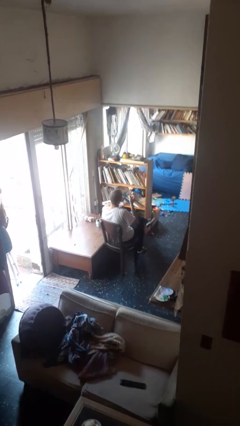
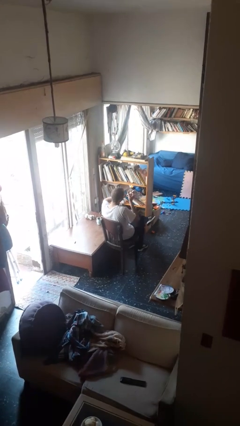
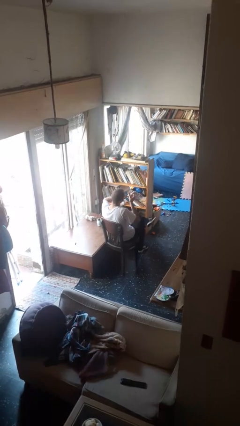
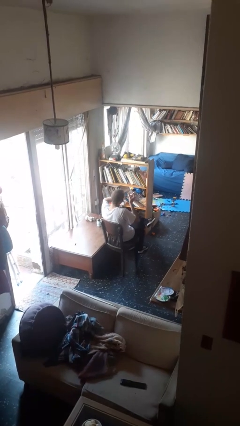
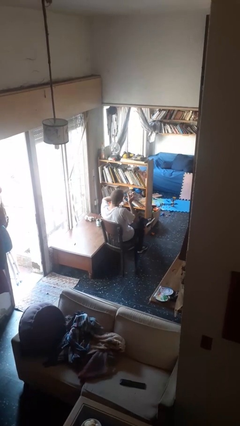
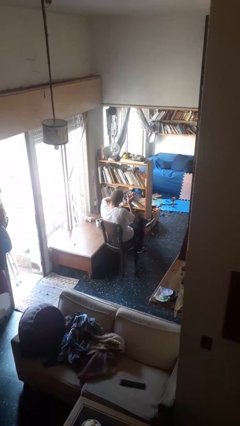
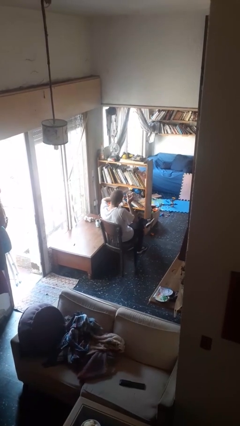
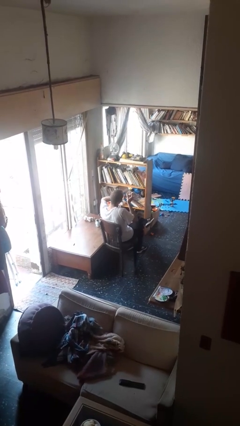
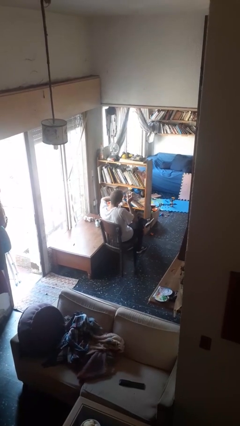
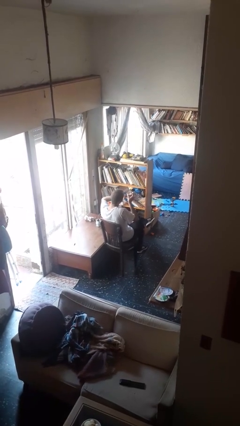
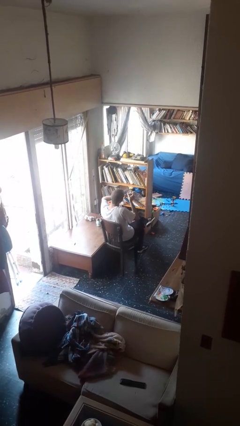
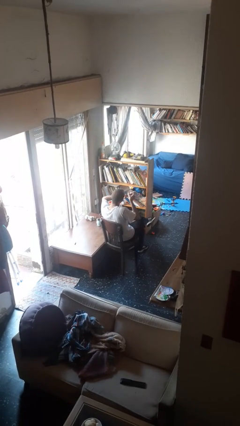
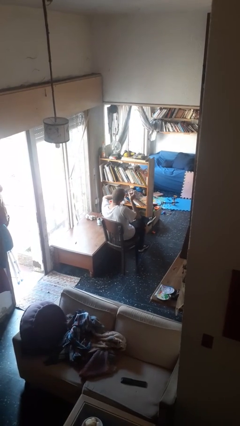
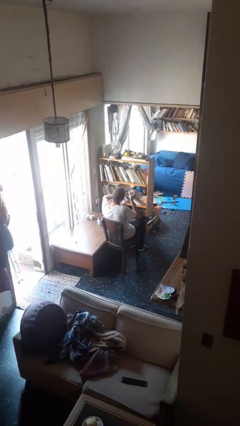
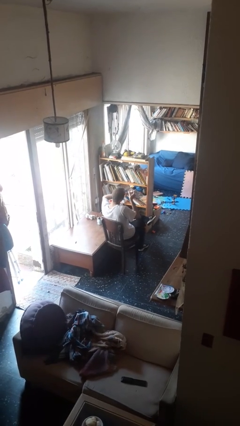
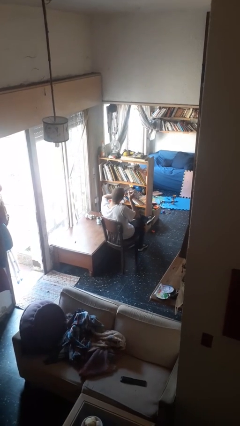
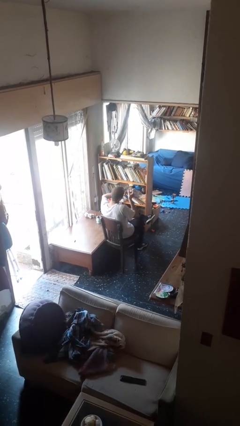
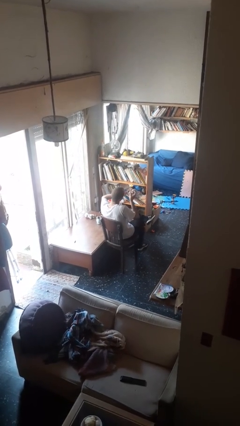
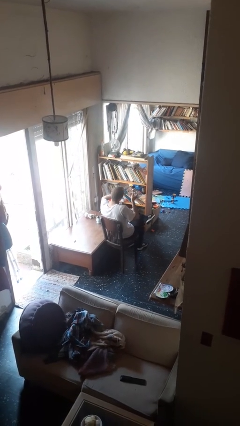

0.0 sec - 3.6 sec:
person clips fingernails

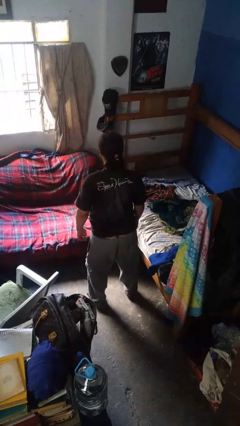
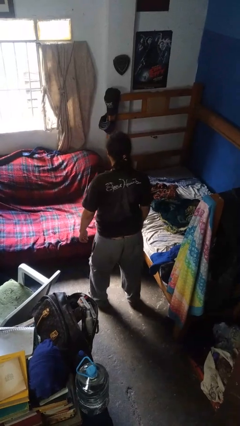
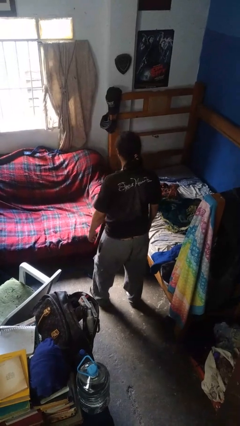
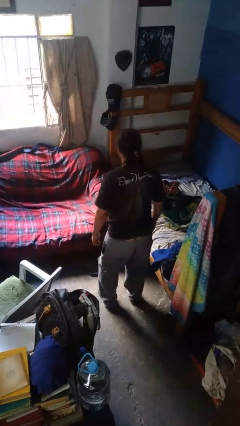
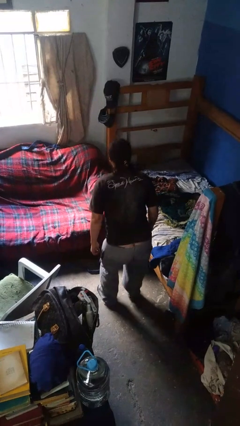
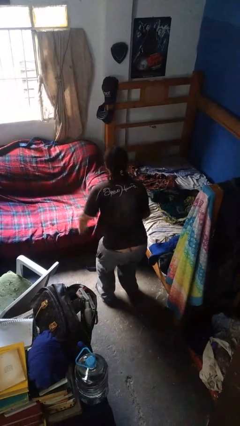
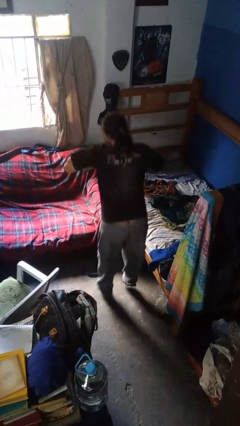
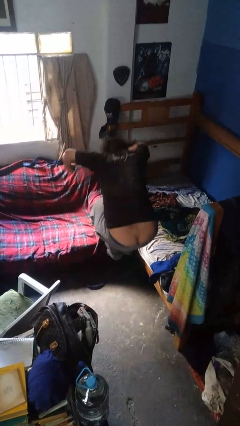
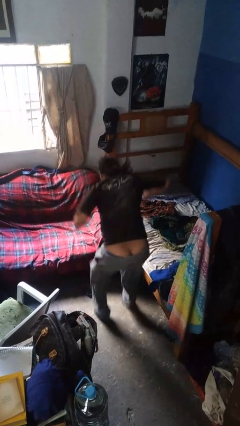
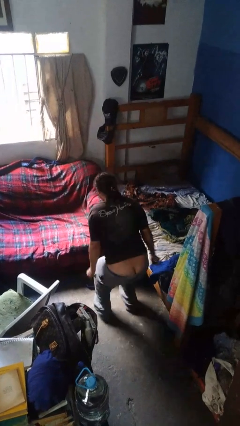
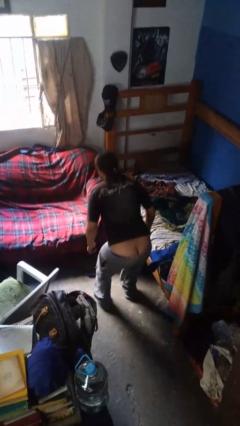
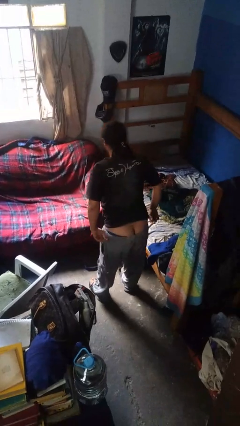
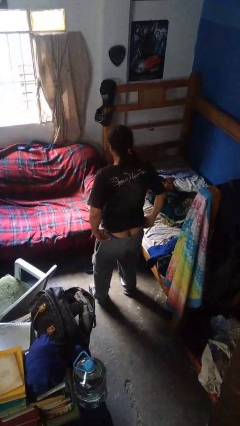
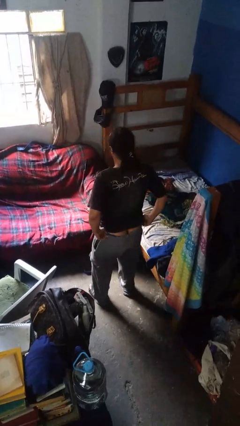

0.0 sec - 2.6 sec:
person jumps

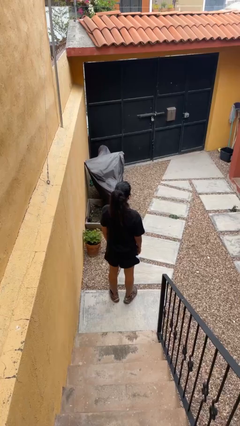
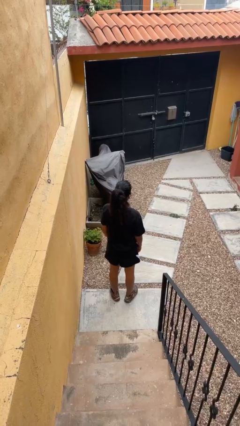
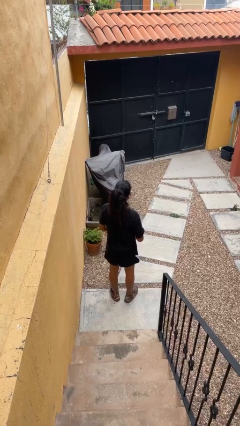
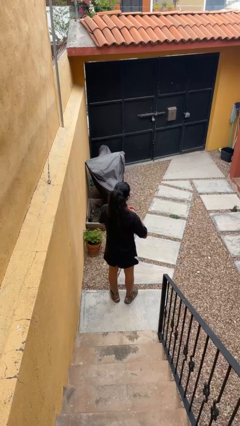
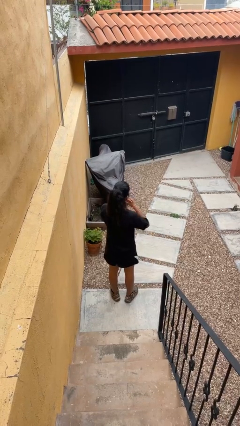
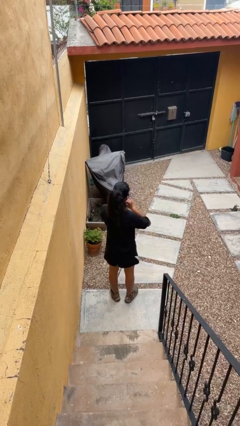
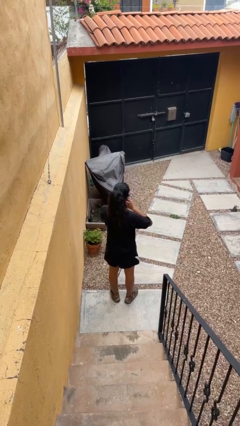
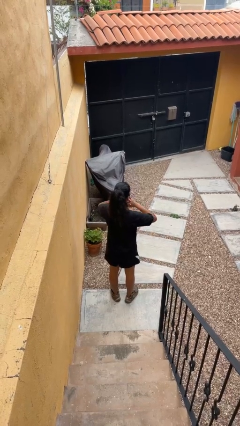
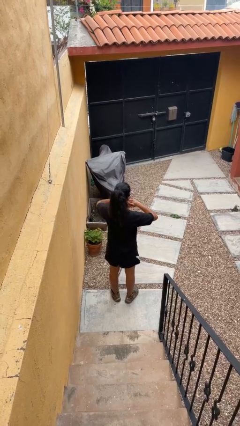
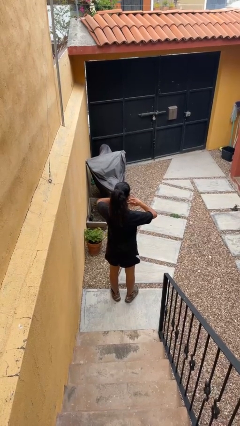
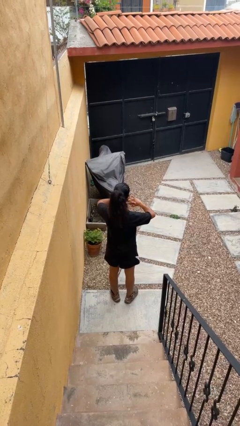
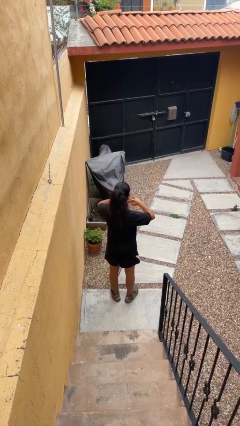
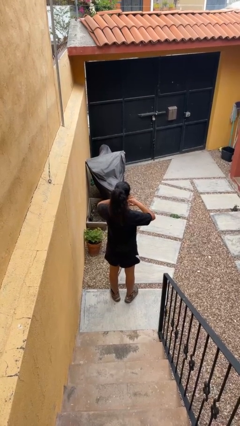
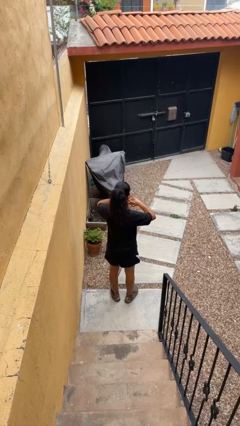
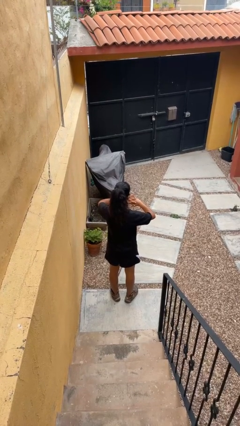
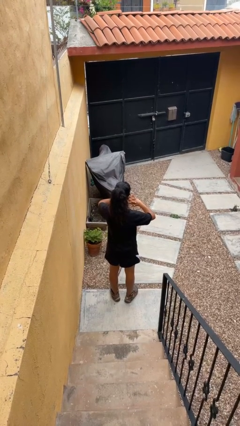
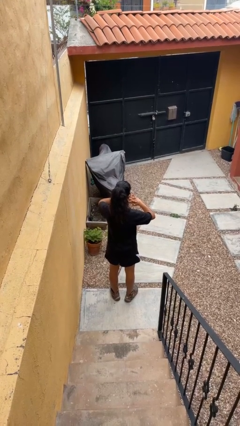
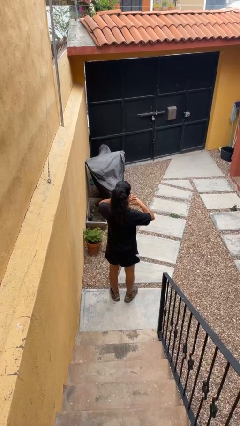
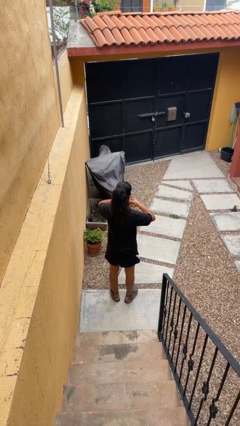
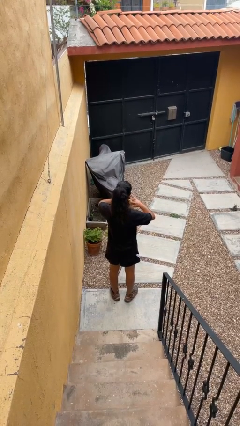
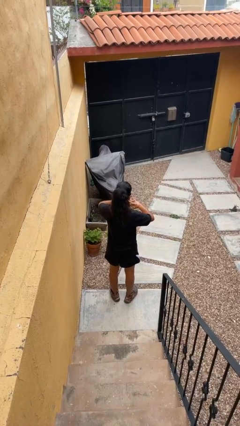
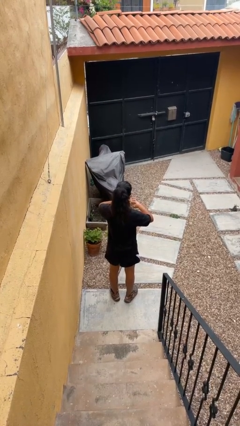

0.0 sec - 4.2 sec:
person cracks knuckles

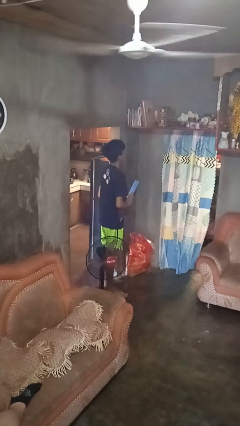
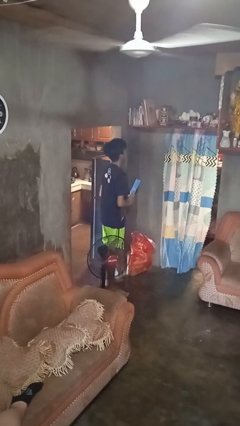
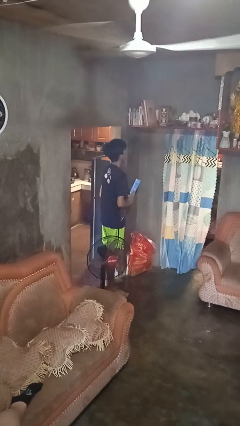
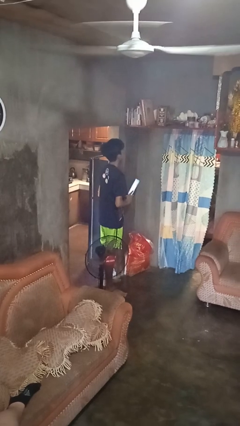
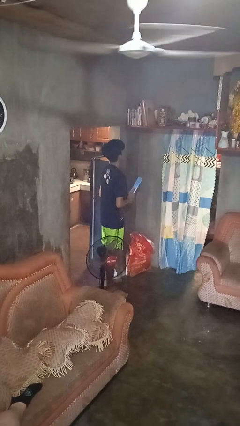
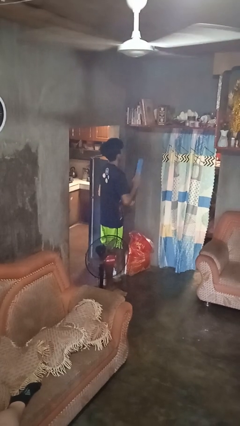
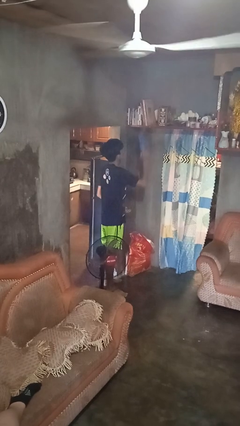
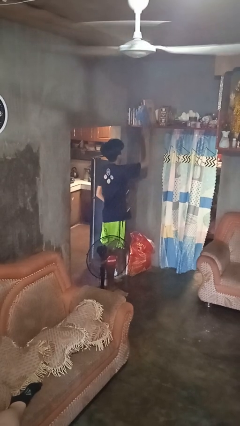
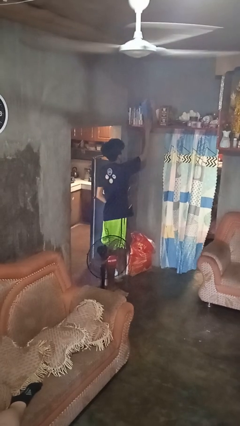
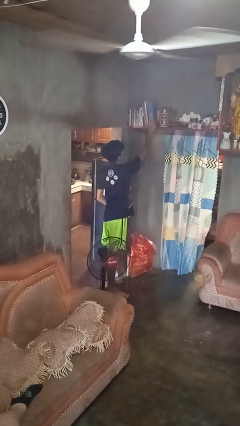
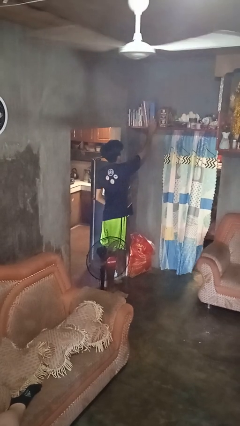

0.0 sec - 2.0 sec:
person puts down object on shelf

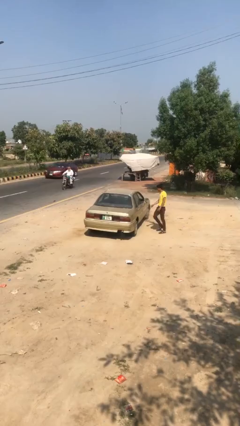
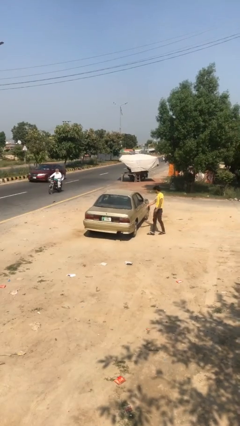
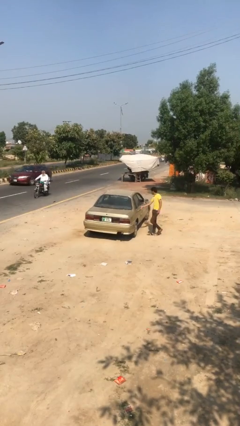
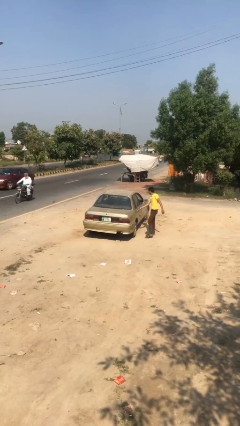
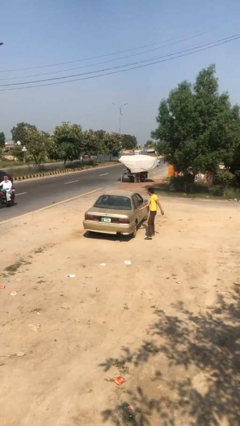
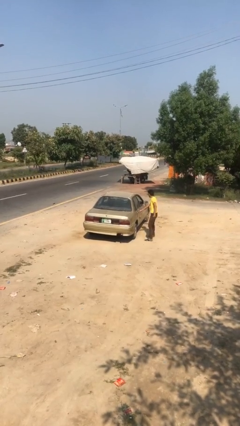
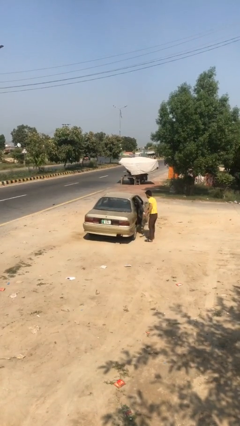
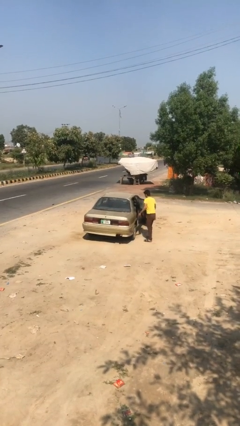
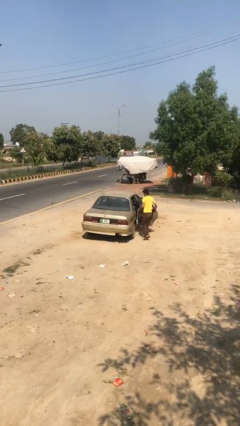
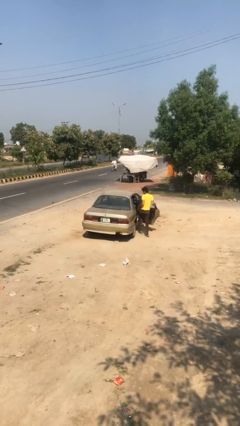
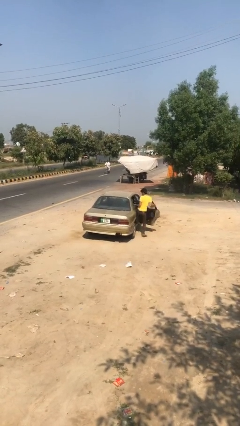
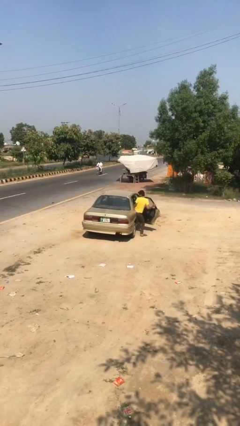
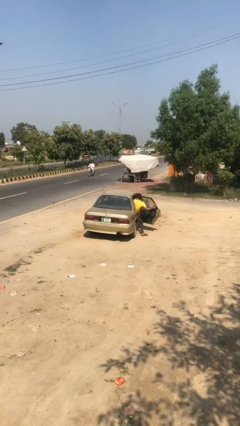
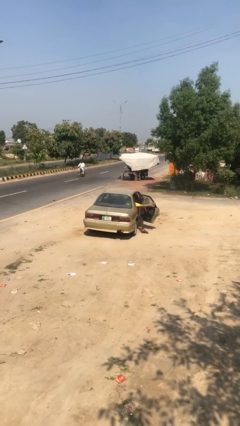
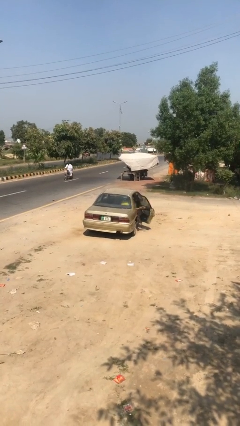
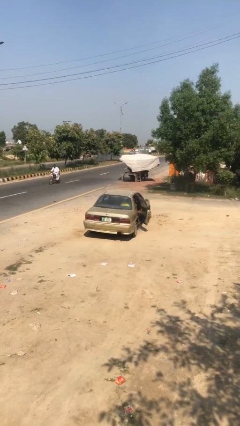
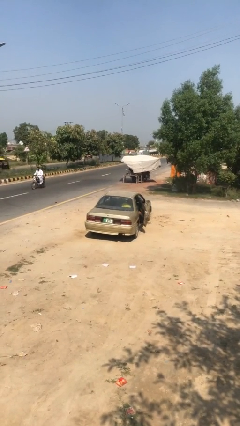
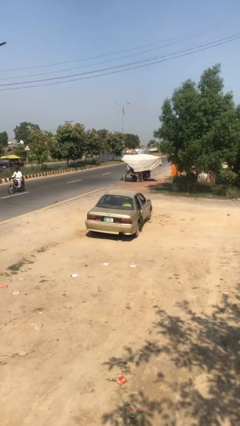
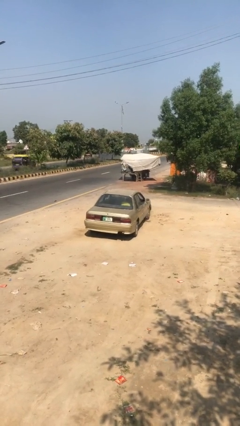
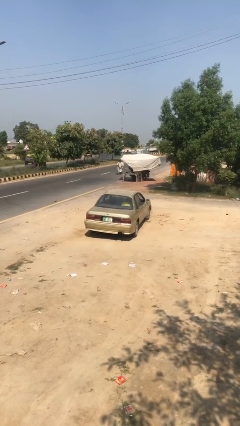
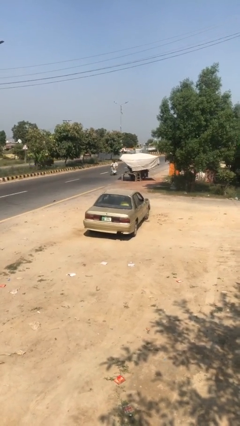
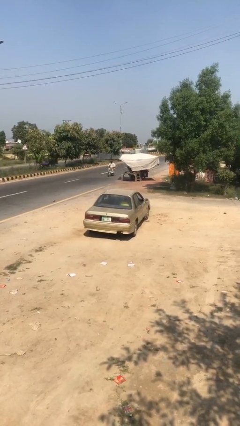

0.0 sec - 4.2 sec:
car picks up person

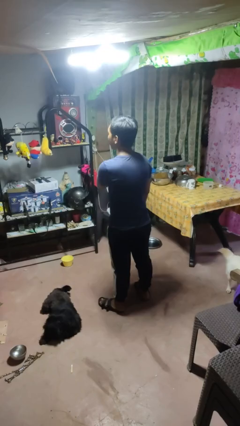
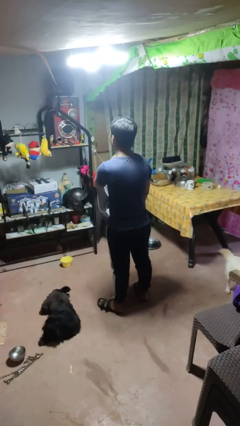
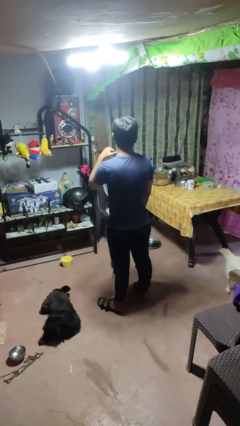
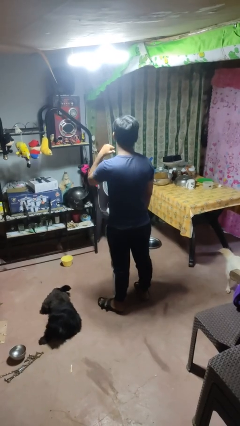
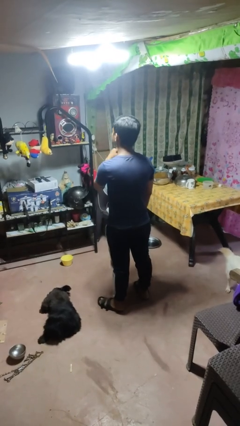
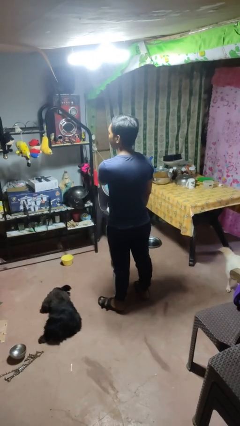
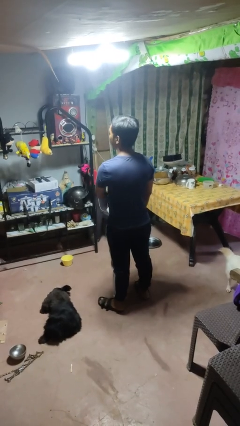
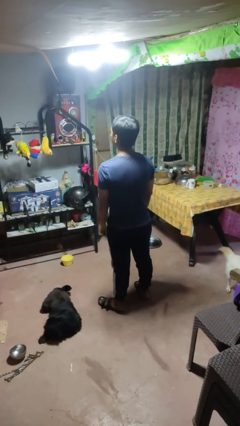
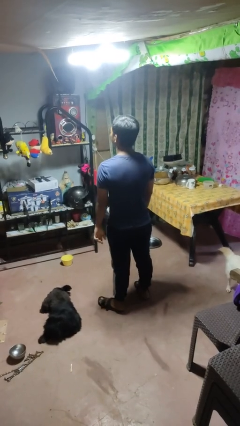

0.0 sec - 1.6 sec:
person gestures cut
